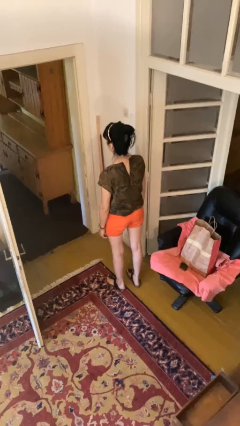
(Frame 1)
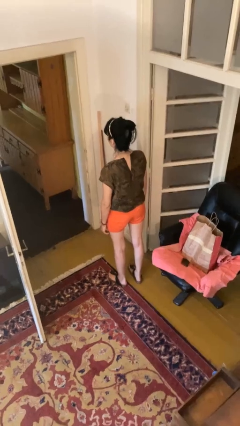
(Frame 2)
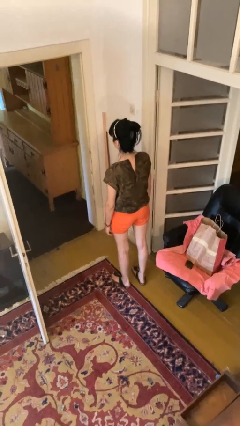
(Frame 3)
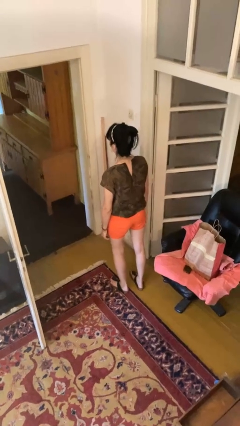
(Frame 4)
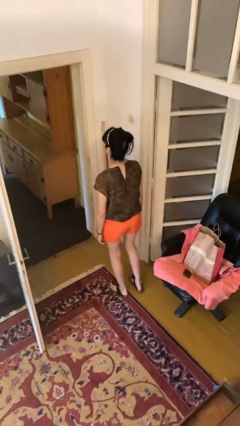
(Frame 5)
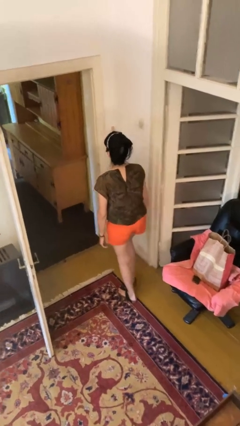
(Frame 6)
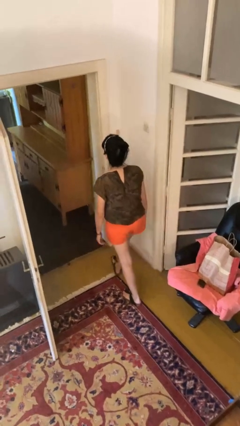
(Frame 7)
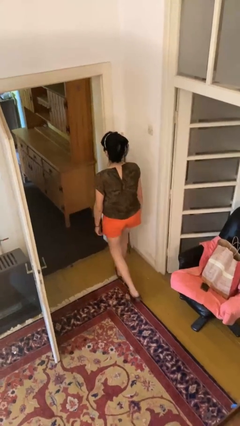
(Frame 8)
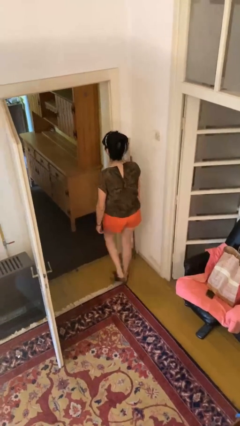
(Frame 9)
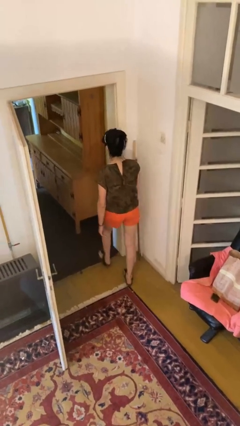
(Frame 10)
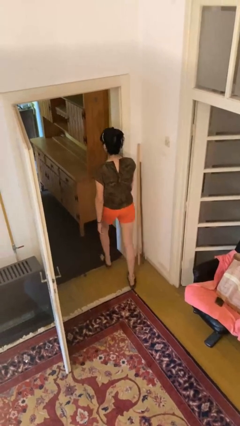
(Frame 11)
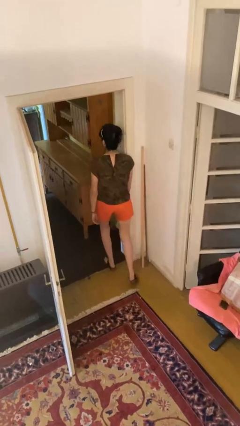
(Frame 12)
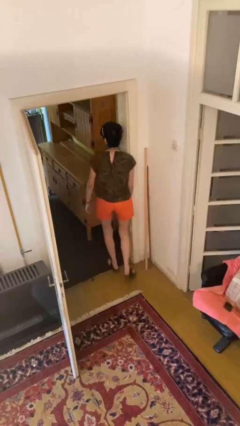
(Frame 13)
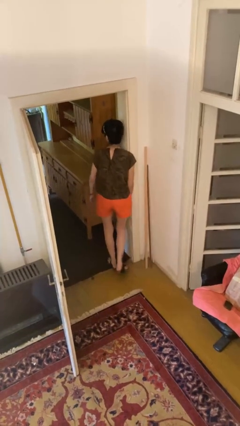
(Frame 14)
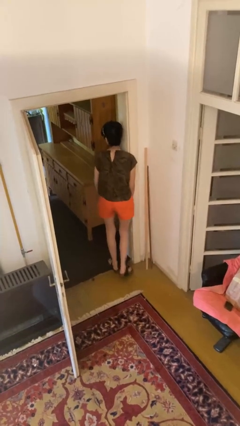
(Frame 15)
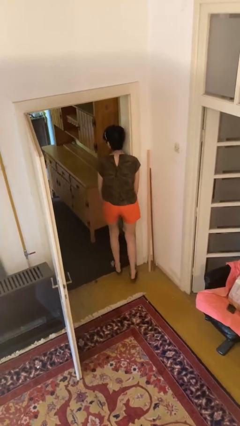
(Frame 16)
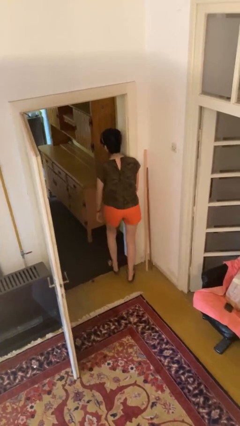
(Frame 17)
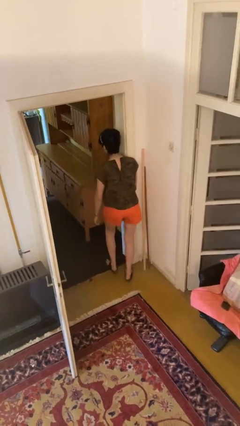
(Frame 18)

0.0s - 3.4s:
person bumps into wall

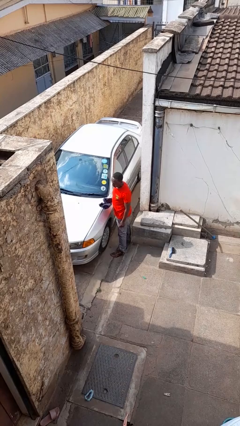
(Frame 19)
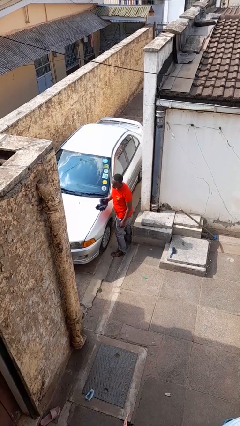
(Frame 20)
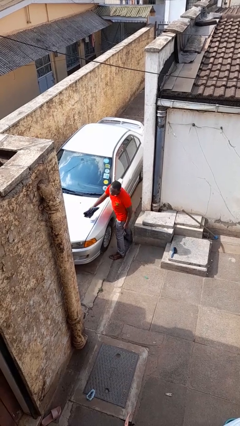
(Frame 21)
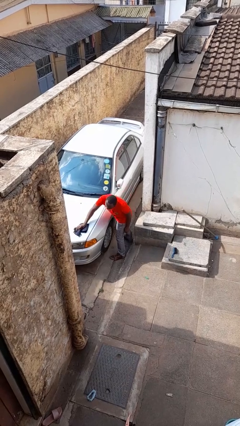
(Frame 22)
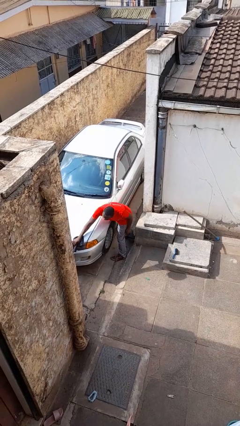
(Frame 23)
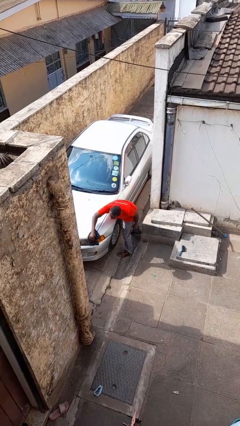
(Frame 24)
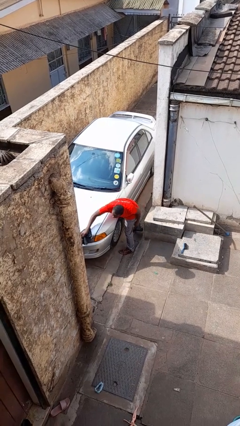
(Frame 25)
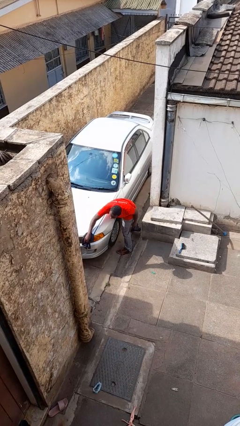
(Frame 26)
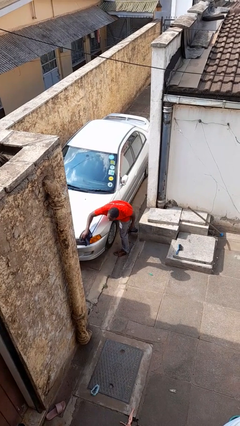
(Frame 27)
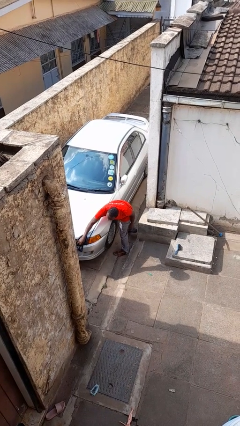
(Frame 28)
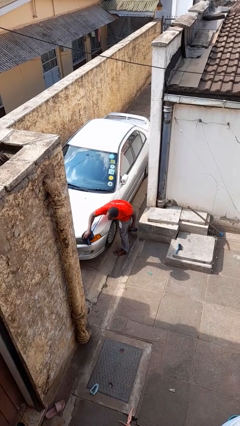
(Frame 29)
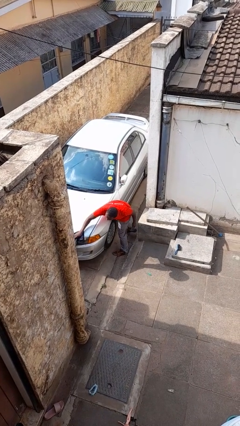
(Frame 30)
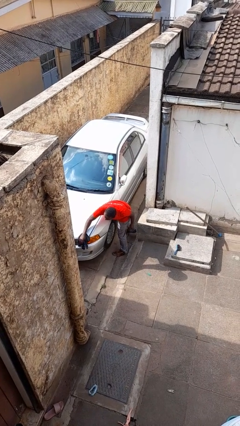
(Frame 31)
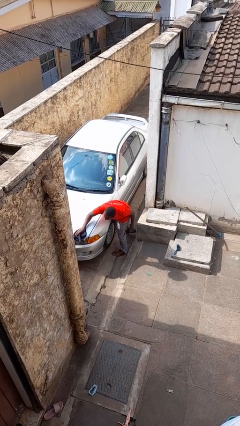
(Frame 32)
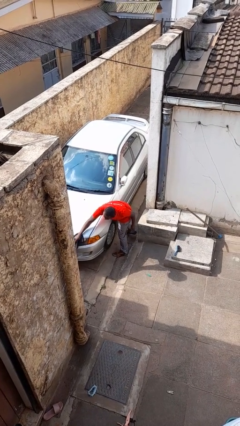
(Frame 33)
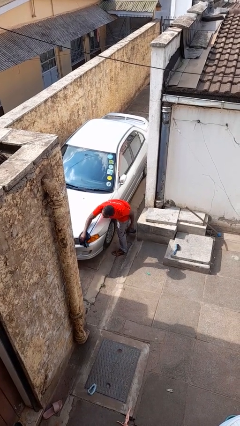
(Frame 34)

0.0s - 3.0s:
person polishes car with rag

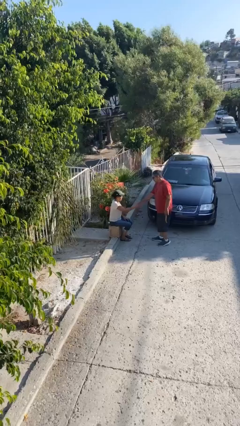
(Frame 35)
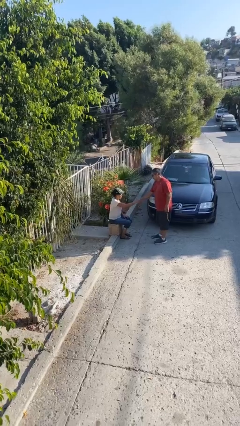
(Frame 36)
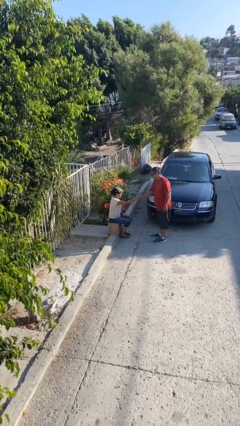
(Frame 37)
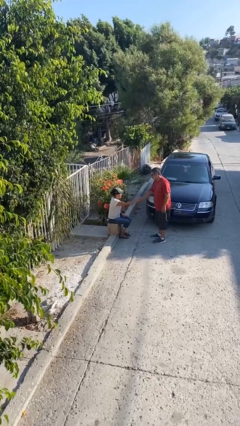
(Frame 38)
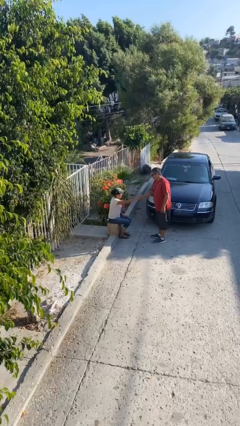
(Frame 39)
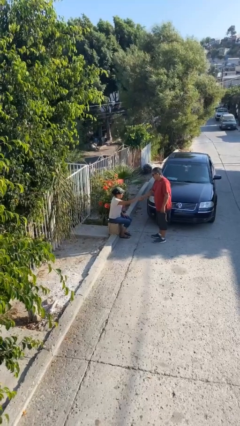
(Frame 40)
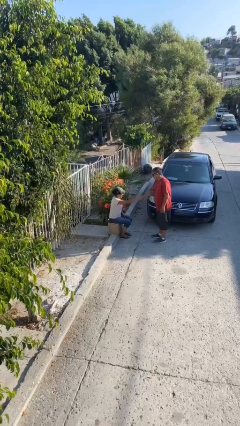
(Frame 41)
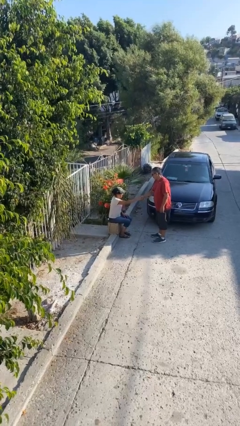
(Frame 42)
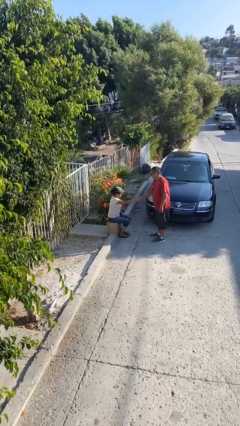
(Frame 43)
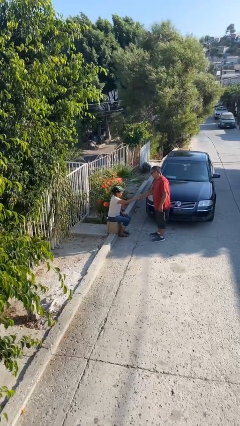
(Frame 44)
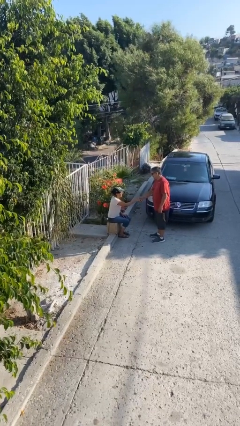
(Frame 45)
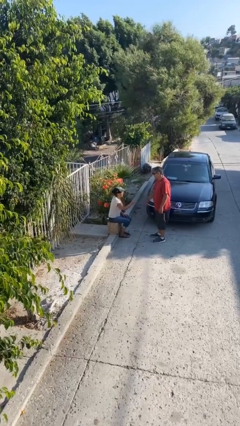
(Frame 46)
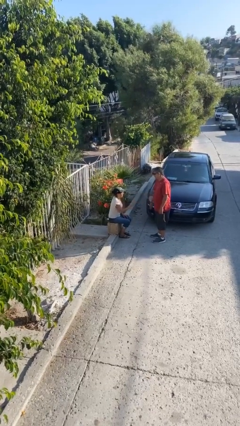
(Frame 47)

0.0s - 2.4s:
person shakes hand

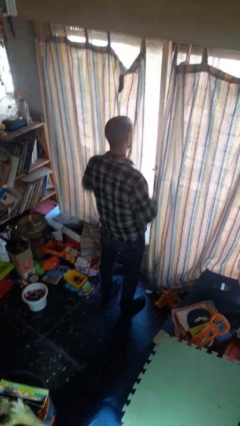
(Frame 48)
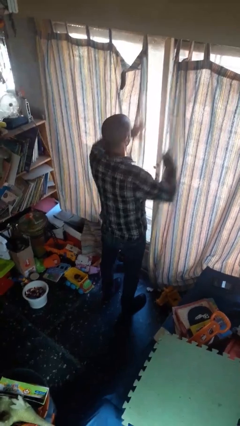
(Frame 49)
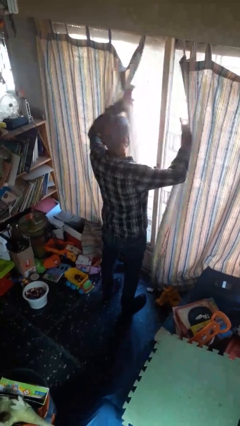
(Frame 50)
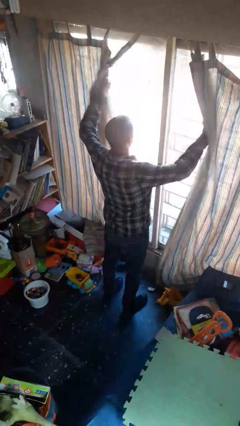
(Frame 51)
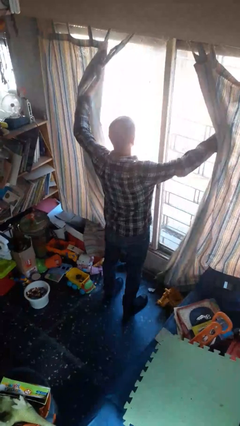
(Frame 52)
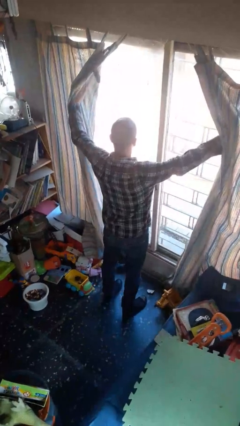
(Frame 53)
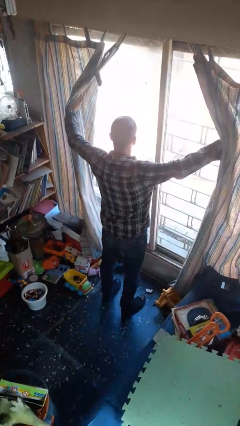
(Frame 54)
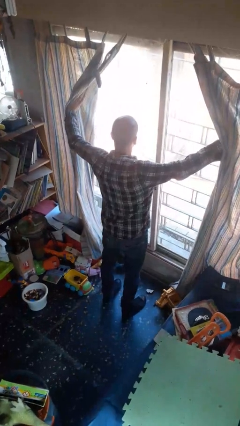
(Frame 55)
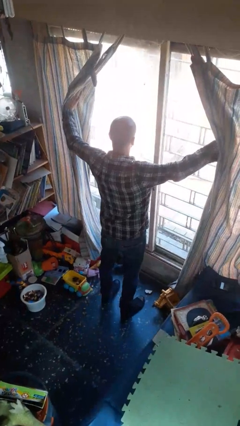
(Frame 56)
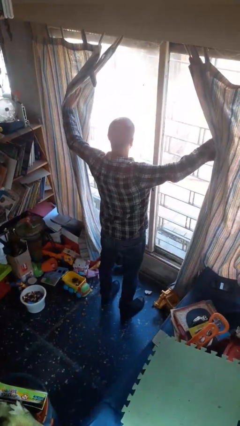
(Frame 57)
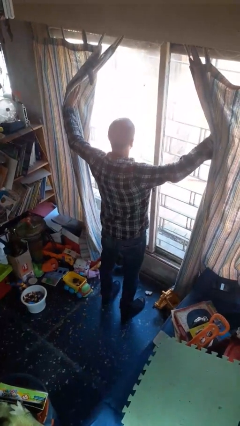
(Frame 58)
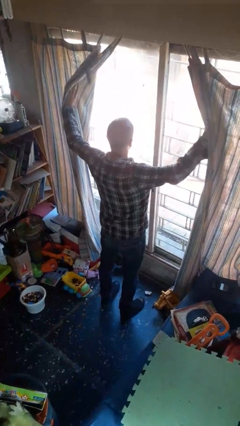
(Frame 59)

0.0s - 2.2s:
person opens curtains

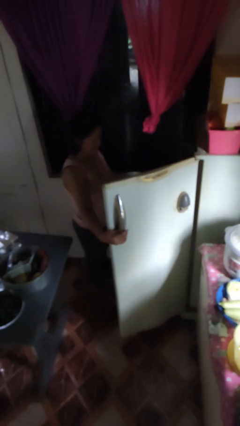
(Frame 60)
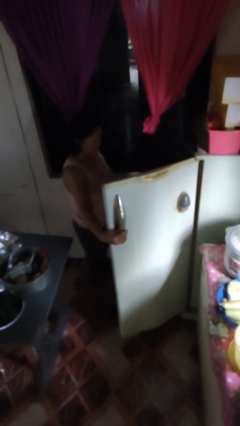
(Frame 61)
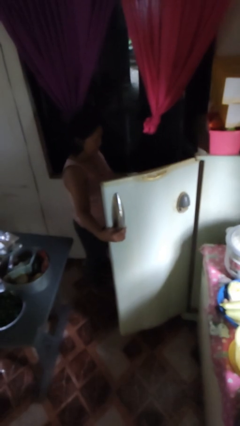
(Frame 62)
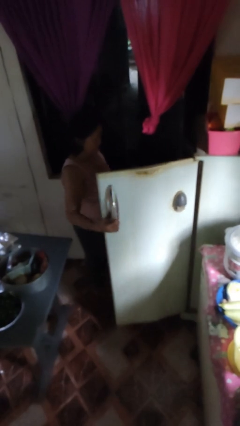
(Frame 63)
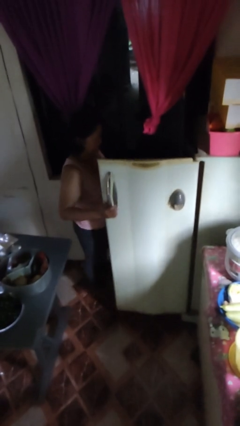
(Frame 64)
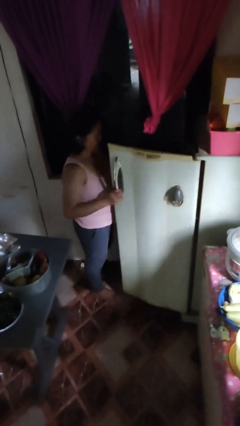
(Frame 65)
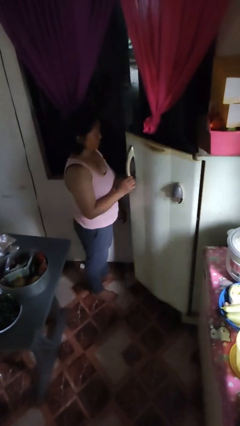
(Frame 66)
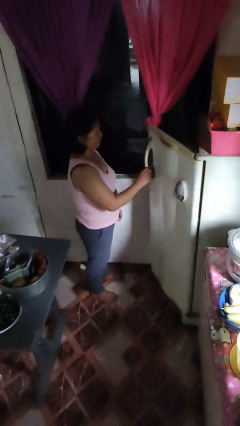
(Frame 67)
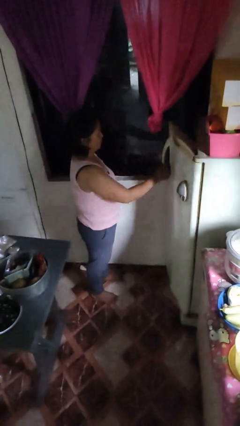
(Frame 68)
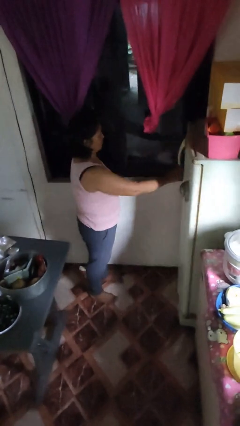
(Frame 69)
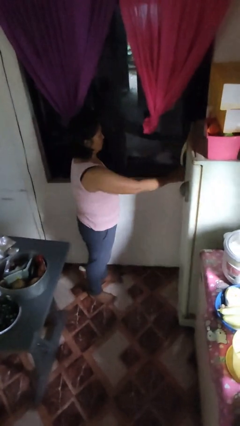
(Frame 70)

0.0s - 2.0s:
person closes refrigerator

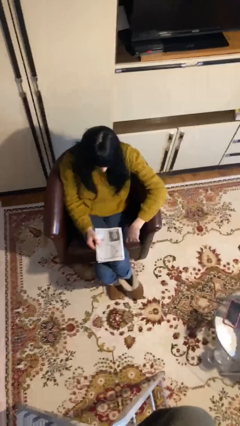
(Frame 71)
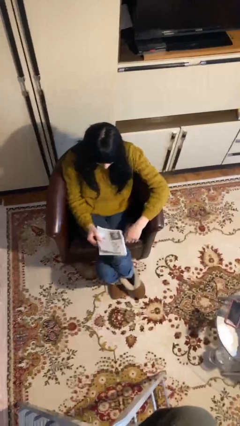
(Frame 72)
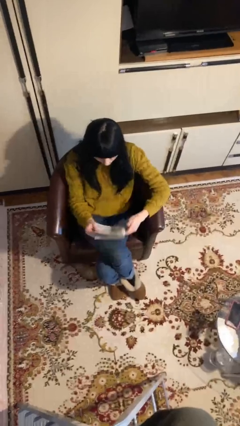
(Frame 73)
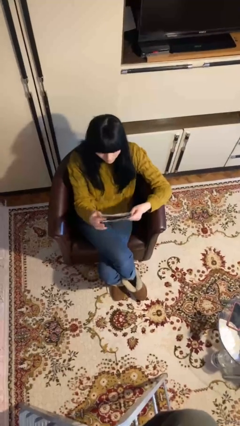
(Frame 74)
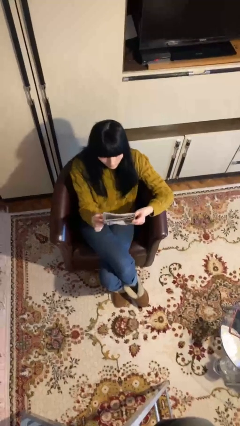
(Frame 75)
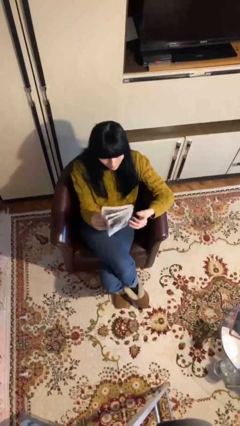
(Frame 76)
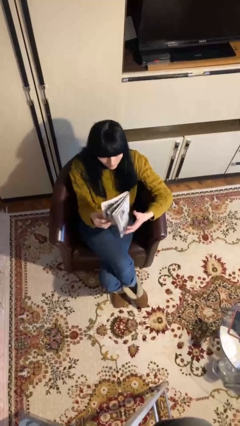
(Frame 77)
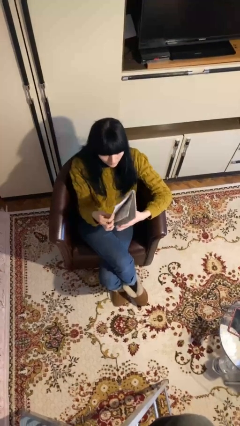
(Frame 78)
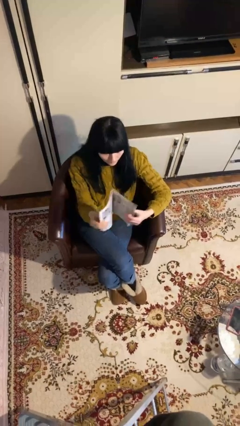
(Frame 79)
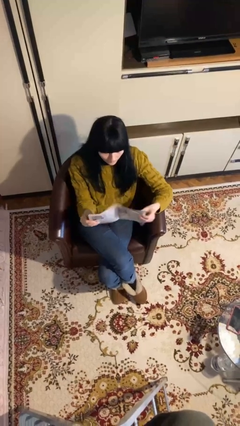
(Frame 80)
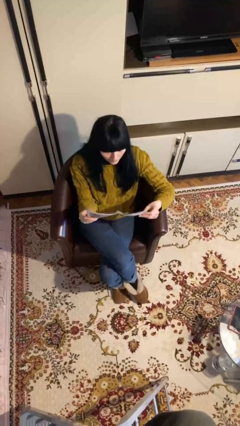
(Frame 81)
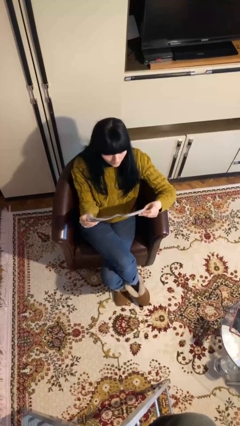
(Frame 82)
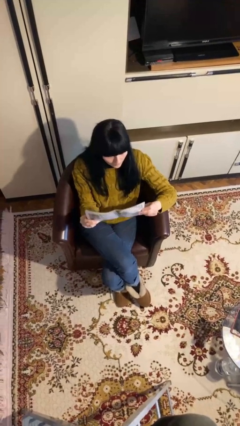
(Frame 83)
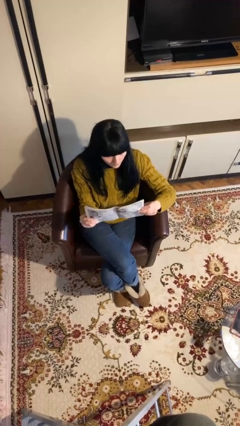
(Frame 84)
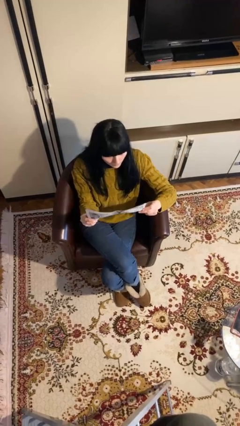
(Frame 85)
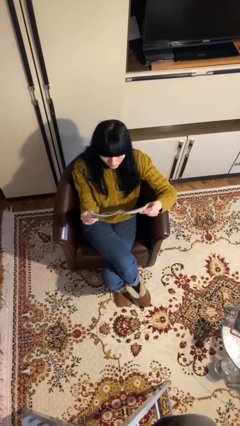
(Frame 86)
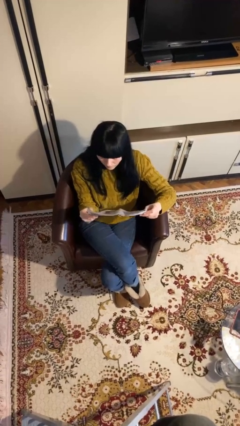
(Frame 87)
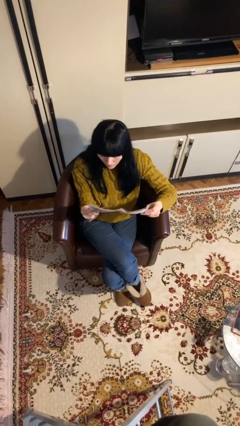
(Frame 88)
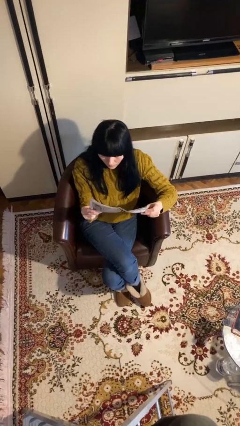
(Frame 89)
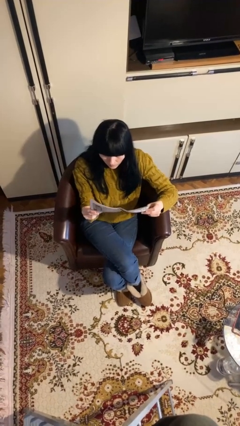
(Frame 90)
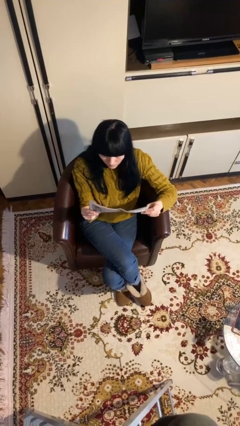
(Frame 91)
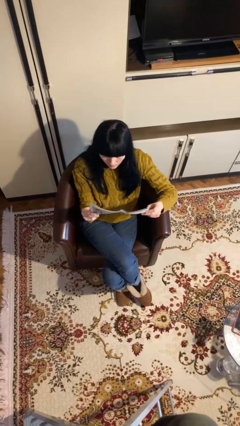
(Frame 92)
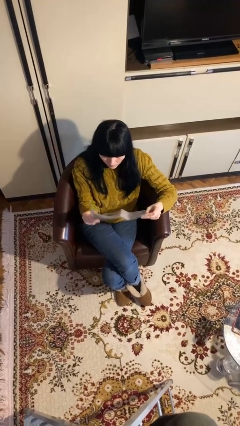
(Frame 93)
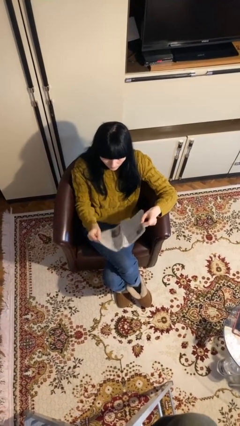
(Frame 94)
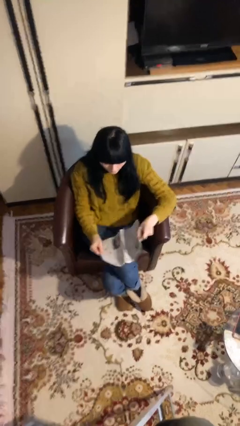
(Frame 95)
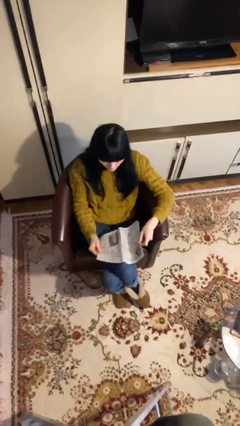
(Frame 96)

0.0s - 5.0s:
person reads document
